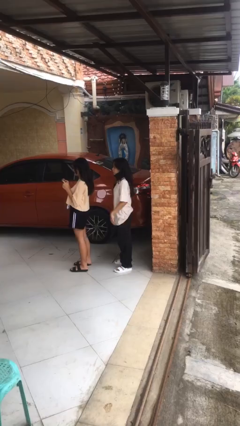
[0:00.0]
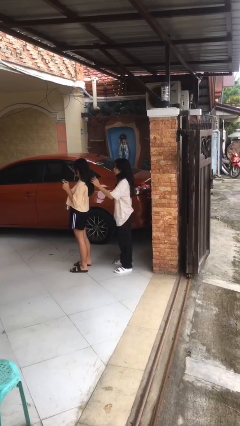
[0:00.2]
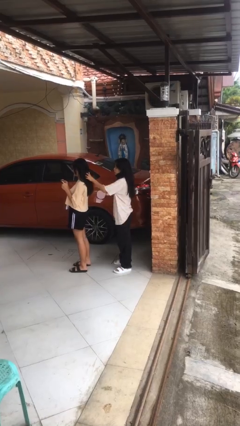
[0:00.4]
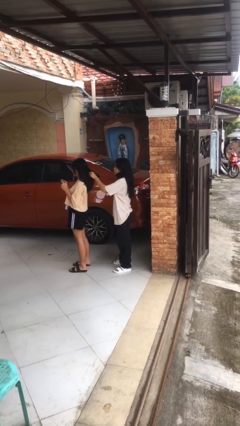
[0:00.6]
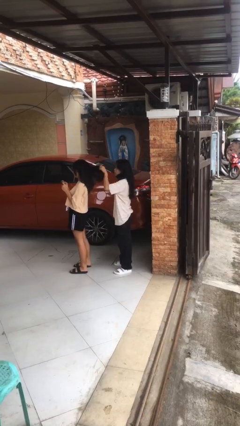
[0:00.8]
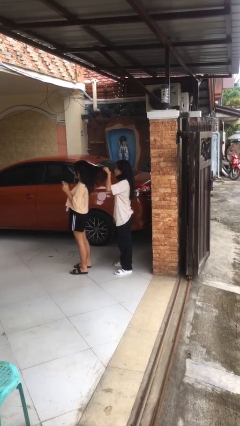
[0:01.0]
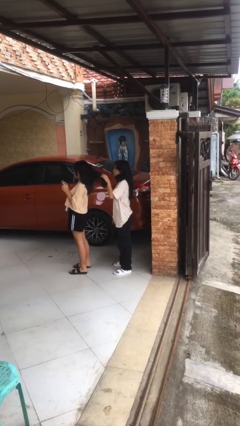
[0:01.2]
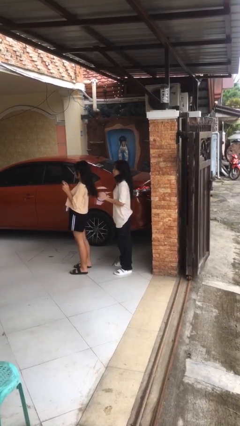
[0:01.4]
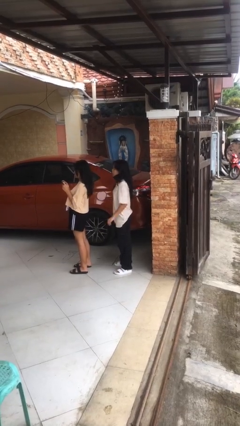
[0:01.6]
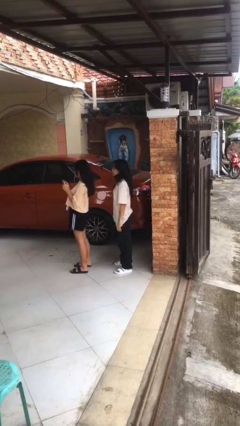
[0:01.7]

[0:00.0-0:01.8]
person grabs person by hair

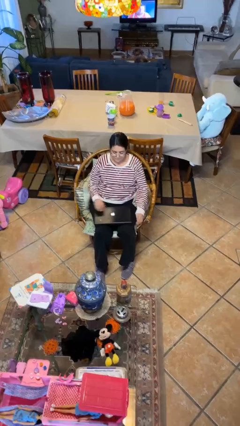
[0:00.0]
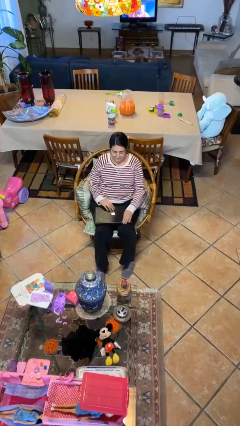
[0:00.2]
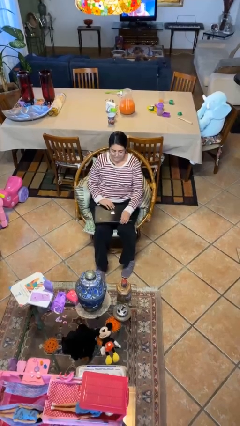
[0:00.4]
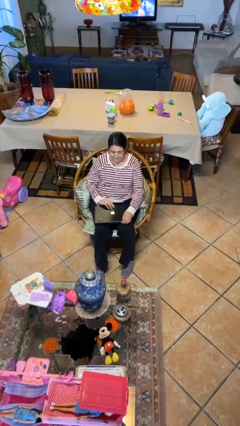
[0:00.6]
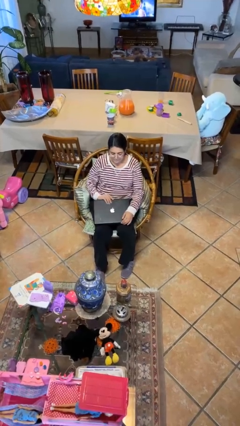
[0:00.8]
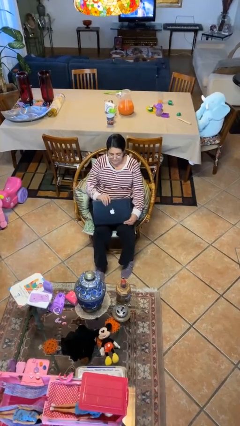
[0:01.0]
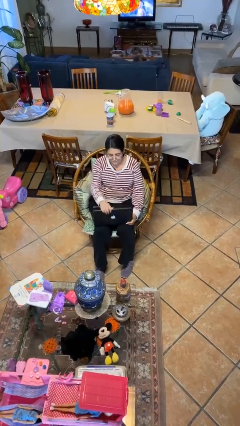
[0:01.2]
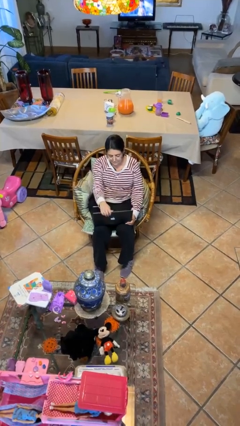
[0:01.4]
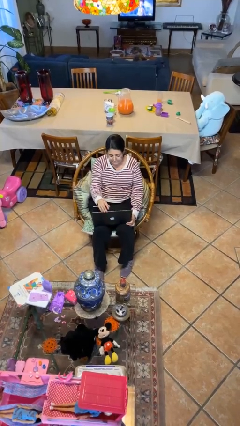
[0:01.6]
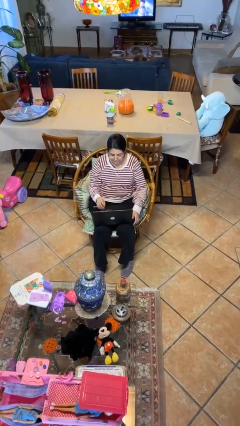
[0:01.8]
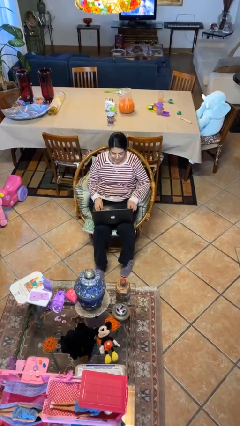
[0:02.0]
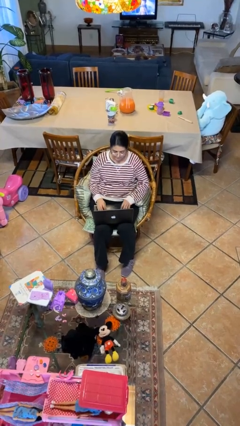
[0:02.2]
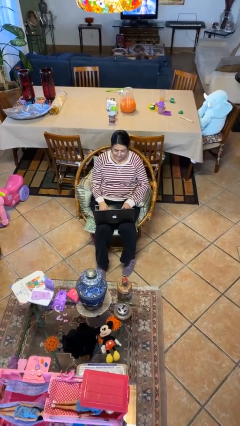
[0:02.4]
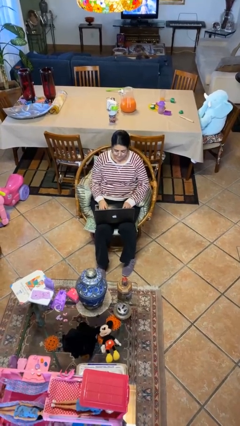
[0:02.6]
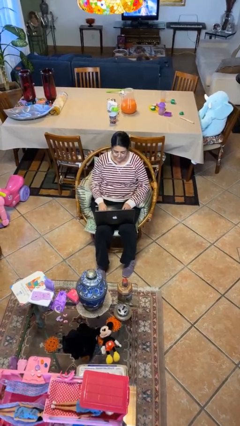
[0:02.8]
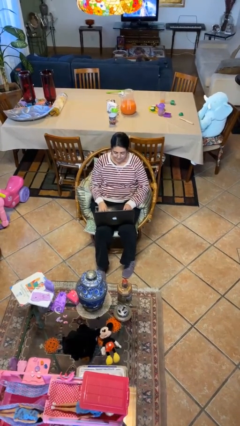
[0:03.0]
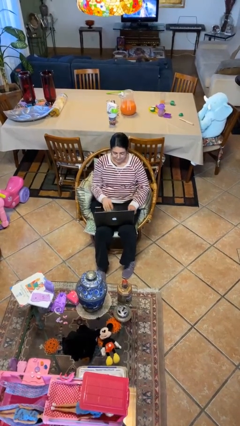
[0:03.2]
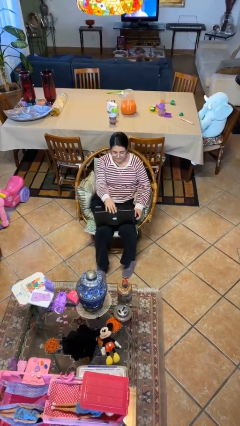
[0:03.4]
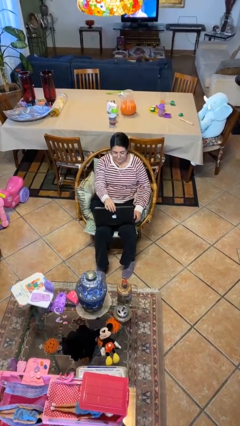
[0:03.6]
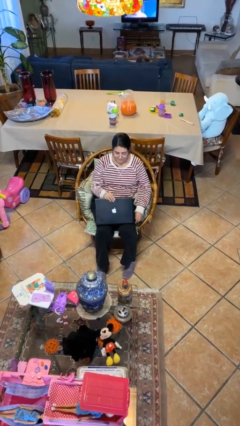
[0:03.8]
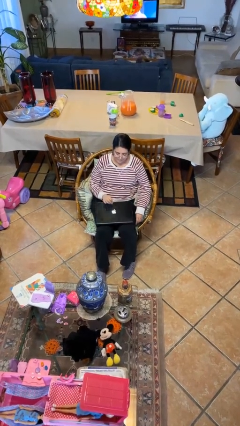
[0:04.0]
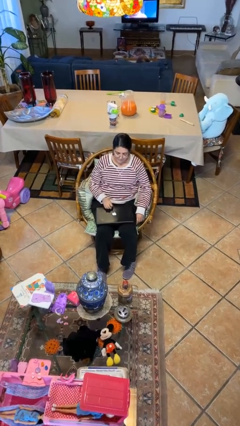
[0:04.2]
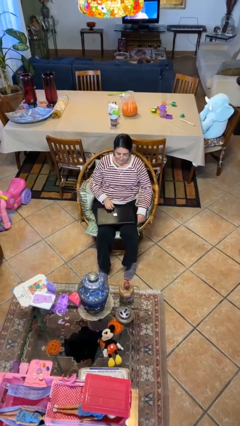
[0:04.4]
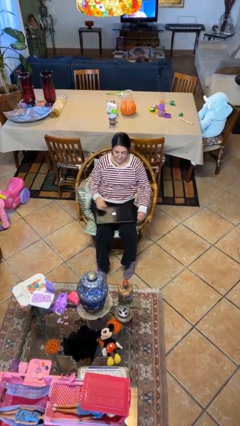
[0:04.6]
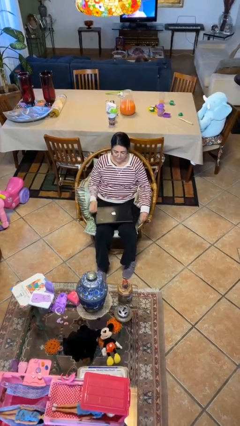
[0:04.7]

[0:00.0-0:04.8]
person interacts with laptop

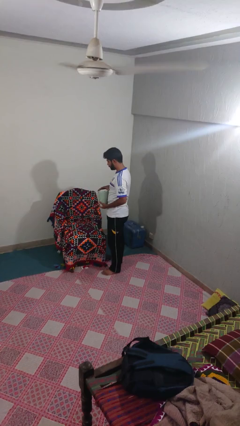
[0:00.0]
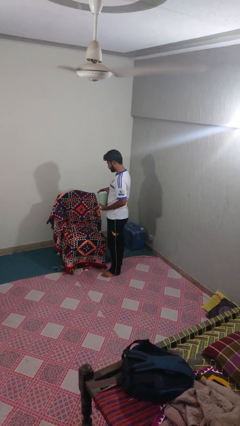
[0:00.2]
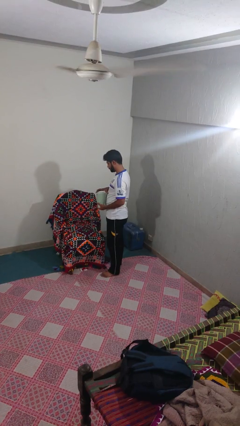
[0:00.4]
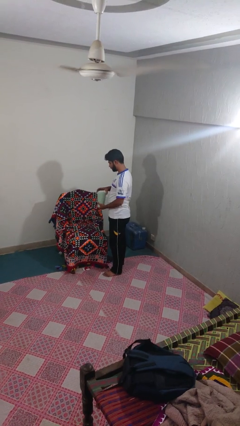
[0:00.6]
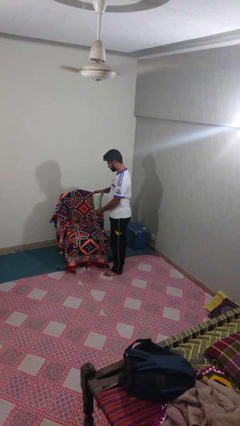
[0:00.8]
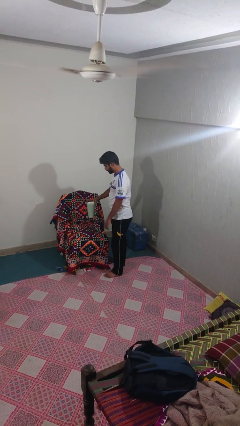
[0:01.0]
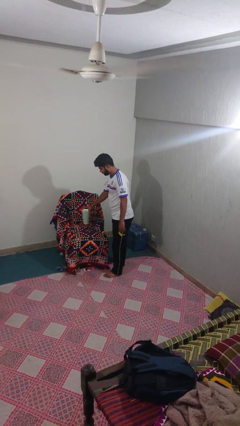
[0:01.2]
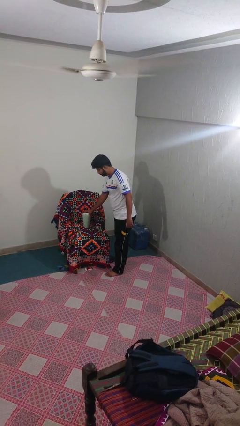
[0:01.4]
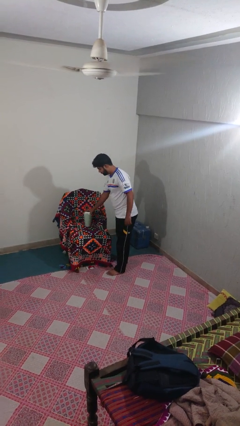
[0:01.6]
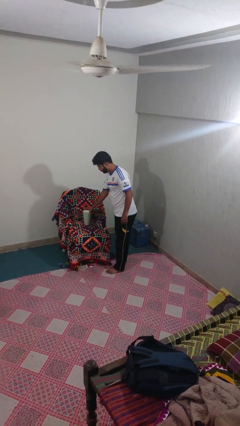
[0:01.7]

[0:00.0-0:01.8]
person puts down object on couch

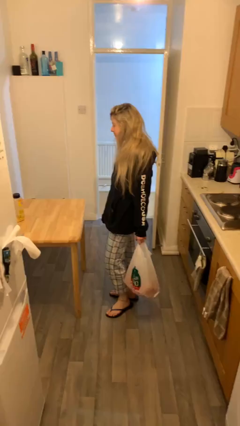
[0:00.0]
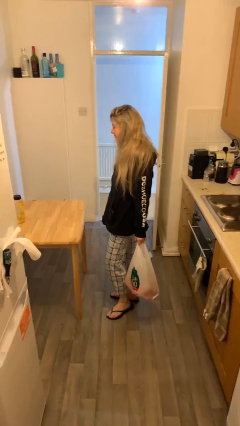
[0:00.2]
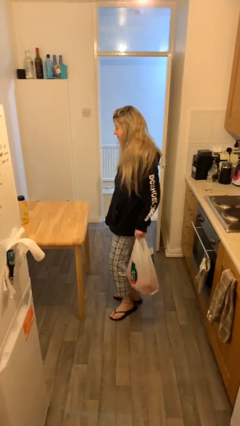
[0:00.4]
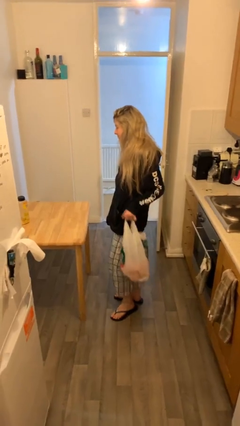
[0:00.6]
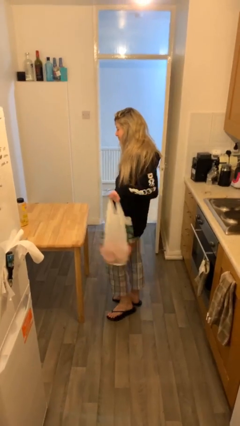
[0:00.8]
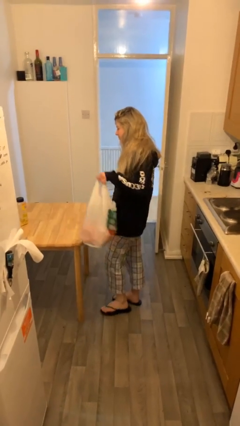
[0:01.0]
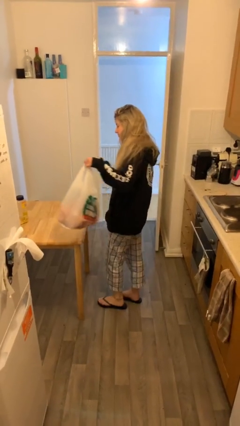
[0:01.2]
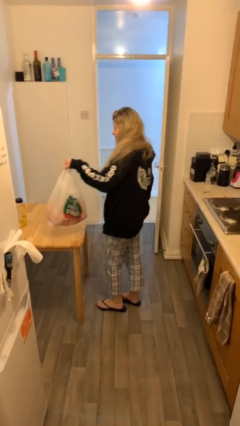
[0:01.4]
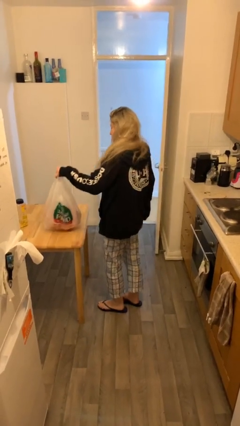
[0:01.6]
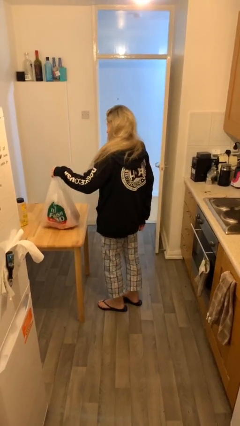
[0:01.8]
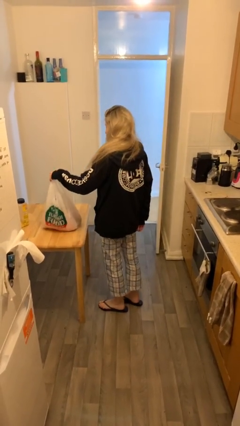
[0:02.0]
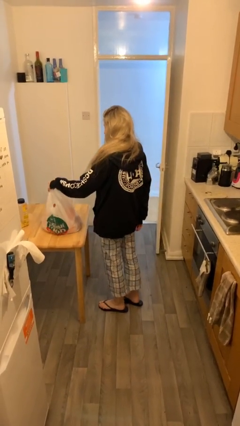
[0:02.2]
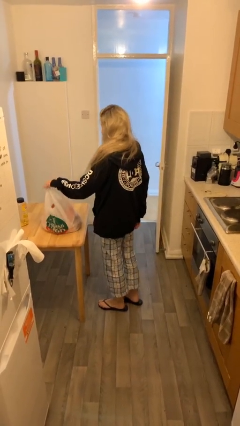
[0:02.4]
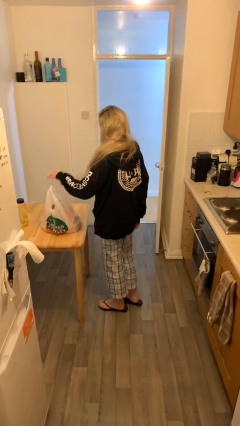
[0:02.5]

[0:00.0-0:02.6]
person puts down object on table

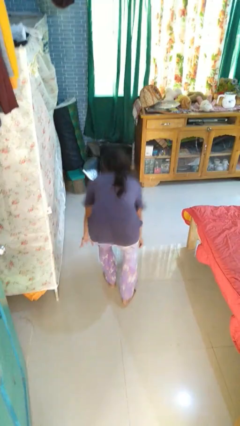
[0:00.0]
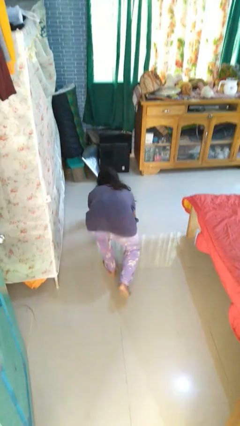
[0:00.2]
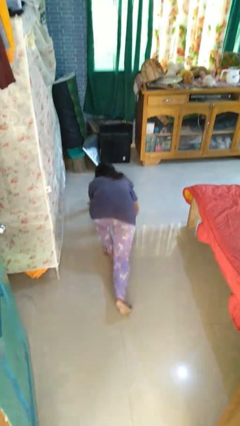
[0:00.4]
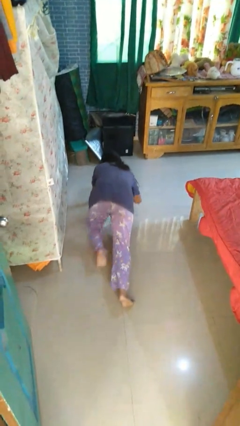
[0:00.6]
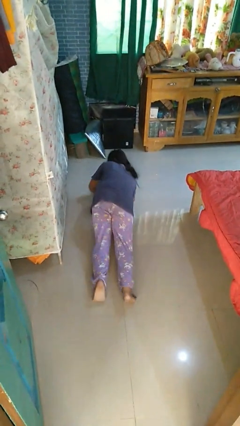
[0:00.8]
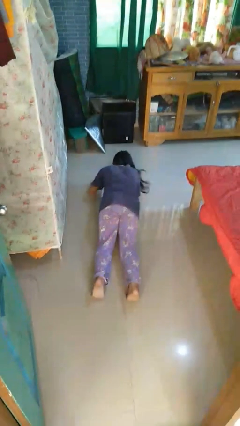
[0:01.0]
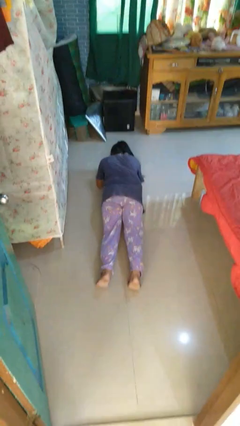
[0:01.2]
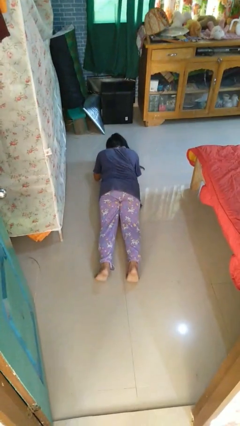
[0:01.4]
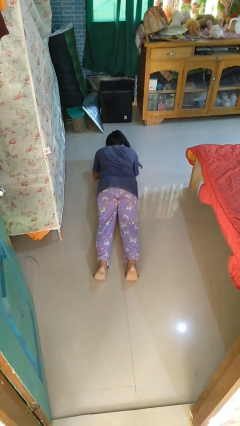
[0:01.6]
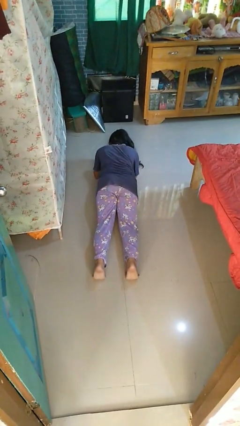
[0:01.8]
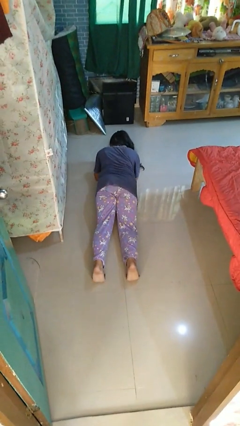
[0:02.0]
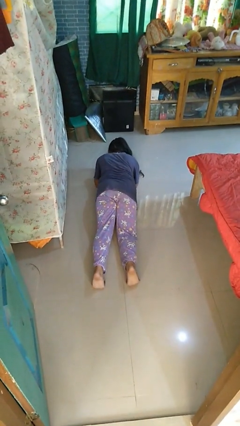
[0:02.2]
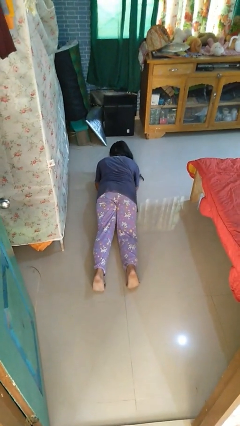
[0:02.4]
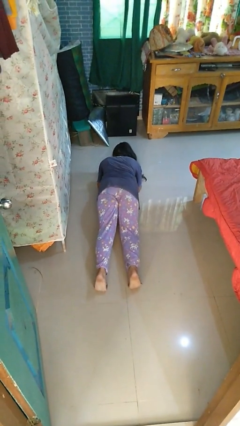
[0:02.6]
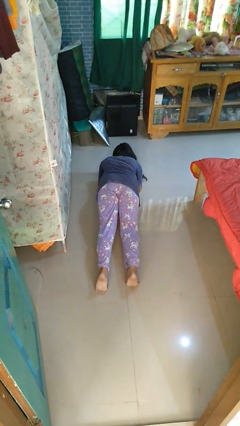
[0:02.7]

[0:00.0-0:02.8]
person exercises with plank

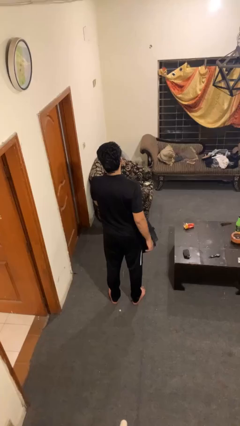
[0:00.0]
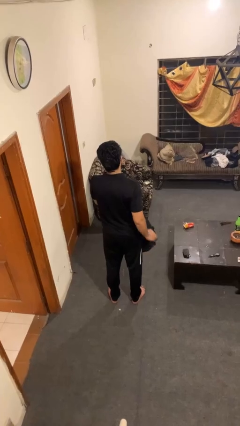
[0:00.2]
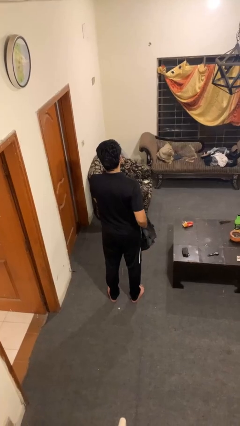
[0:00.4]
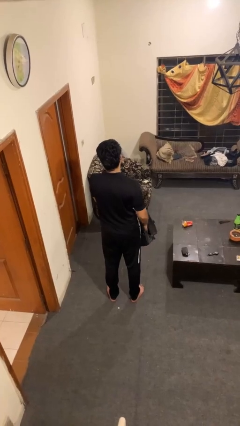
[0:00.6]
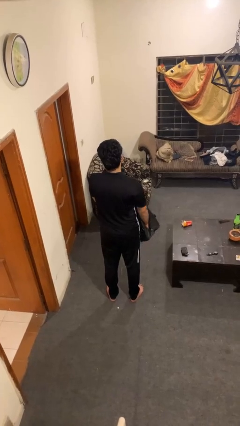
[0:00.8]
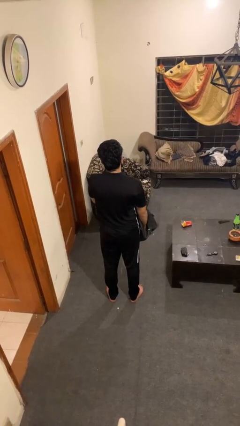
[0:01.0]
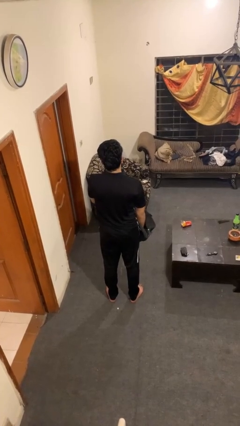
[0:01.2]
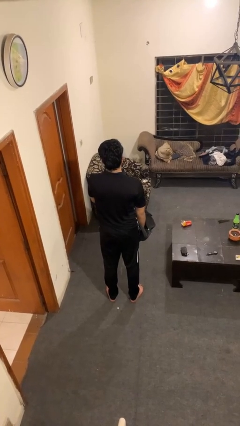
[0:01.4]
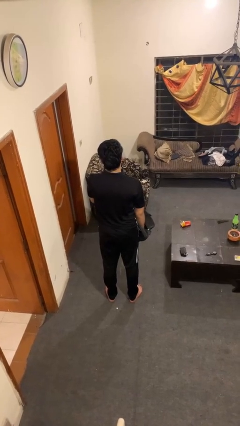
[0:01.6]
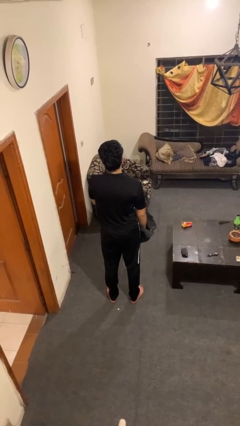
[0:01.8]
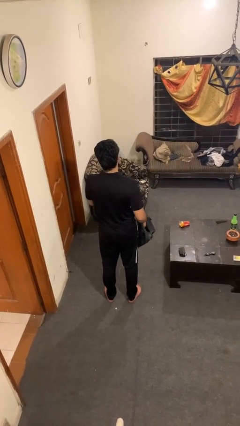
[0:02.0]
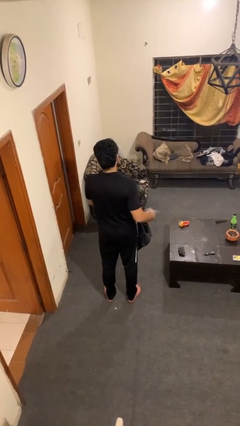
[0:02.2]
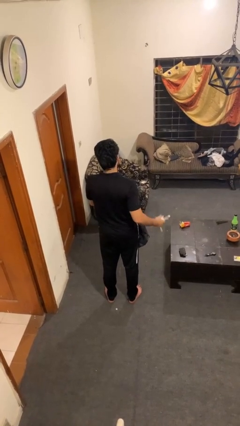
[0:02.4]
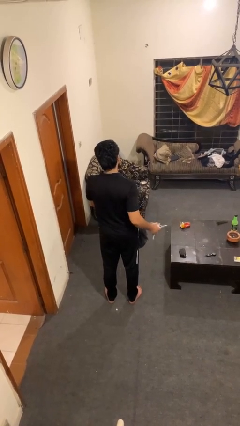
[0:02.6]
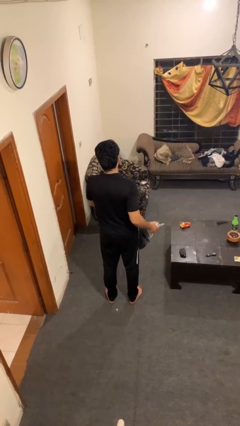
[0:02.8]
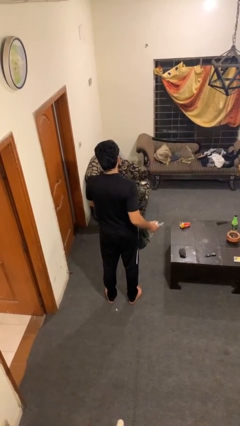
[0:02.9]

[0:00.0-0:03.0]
person takes object from bag
